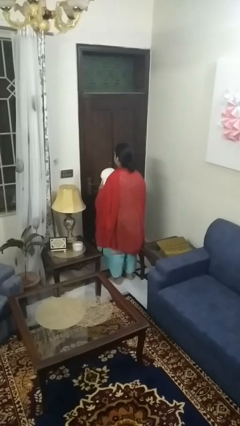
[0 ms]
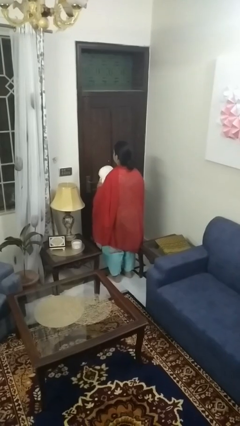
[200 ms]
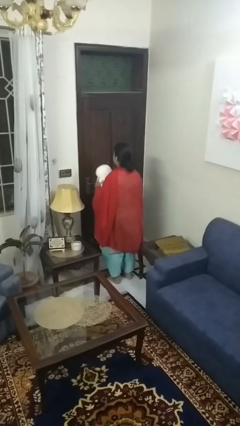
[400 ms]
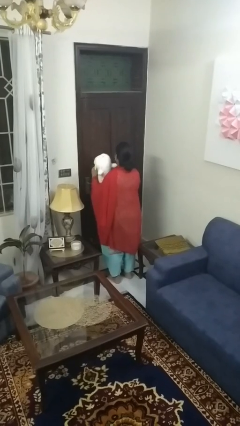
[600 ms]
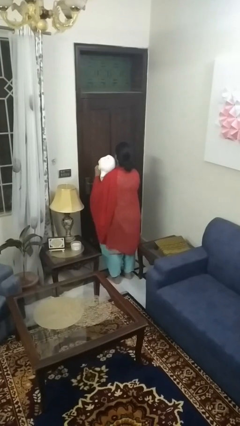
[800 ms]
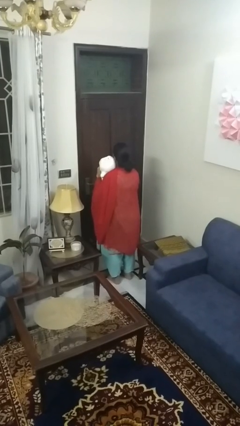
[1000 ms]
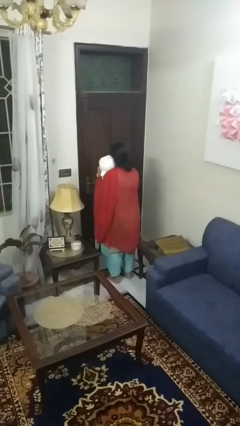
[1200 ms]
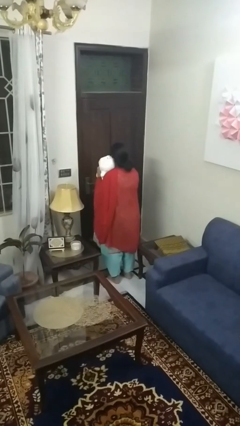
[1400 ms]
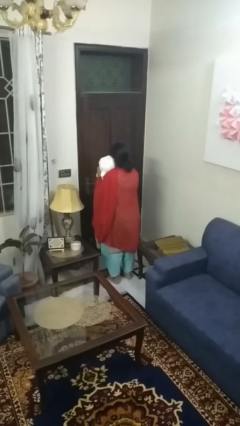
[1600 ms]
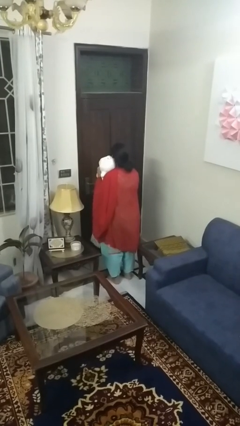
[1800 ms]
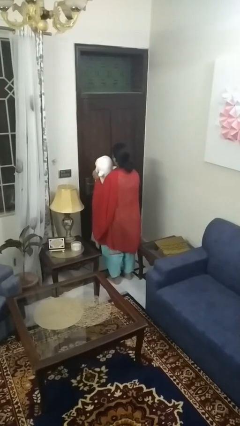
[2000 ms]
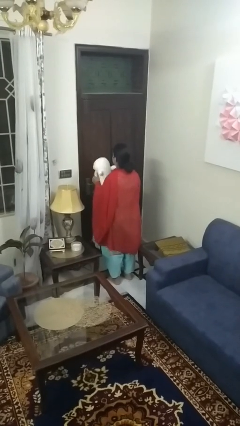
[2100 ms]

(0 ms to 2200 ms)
person hugs stuffed animal

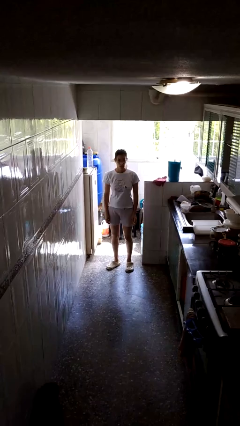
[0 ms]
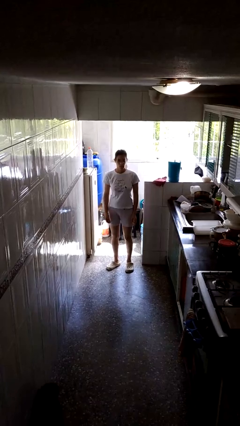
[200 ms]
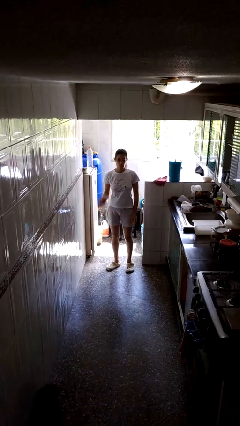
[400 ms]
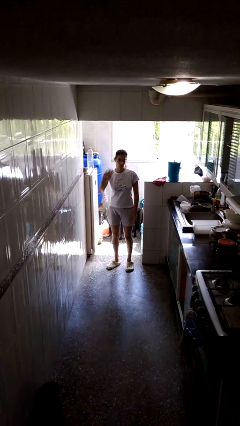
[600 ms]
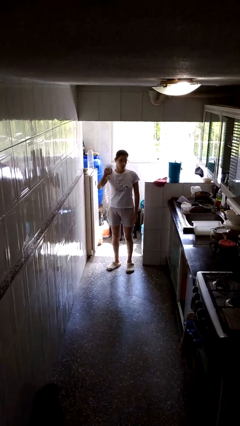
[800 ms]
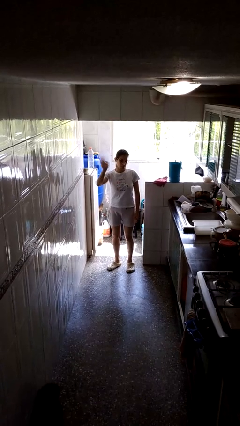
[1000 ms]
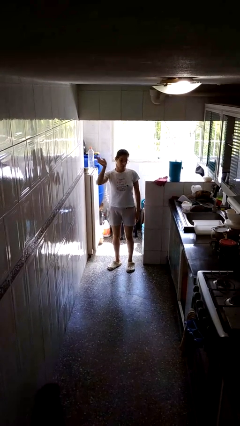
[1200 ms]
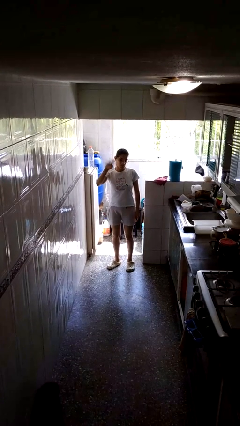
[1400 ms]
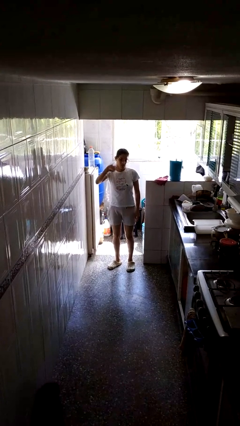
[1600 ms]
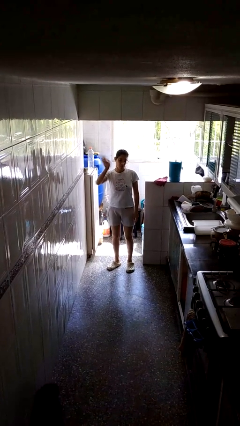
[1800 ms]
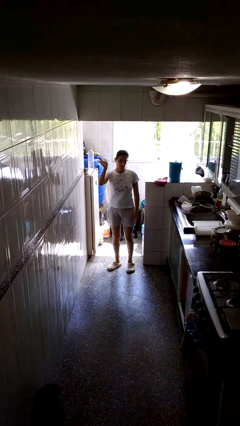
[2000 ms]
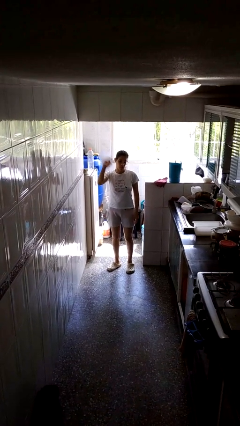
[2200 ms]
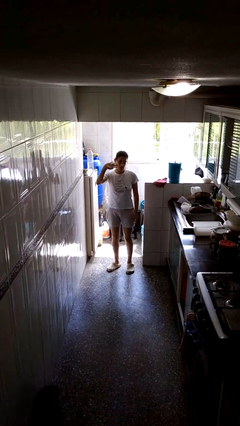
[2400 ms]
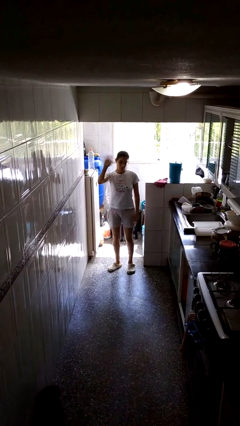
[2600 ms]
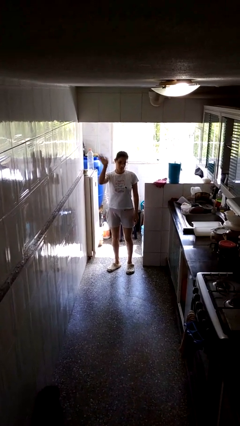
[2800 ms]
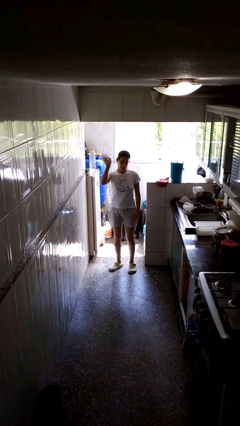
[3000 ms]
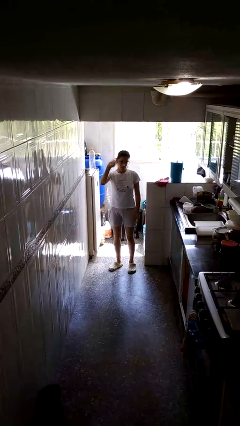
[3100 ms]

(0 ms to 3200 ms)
person waves at person

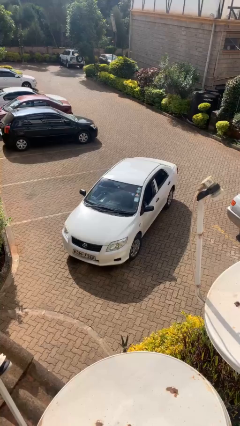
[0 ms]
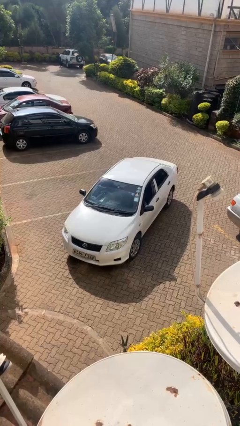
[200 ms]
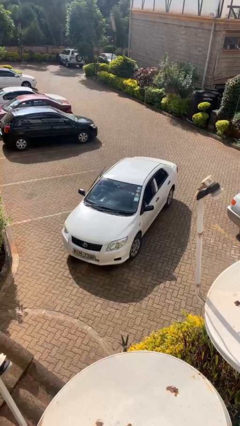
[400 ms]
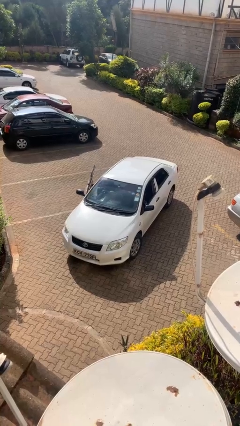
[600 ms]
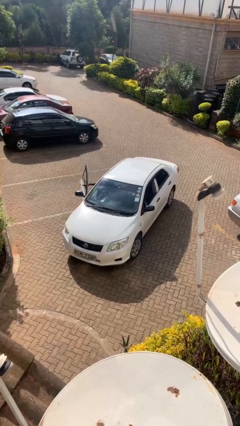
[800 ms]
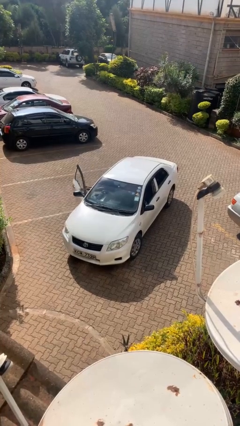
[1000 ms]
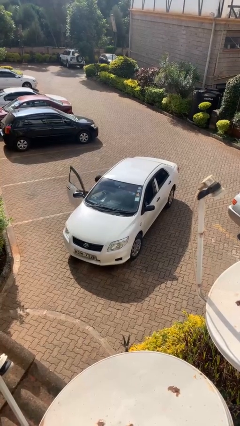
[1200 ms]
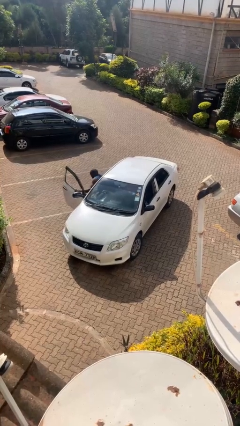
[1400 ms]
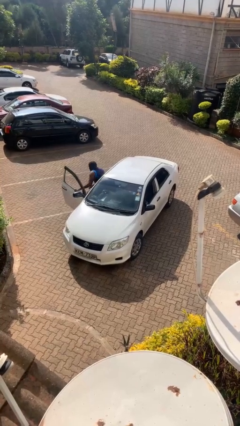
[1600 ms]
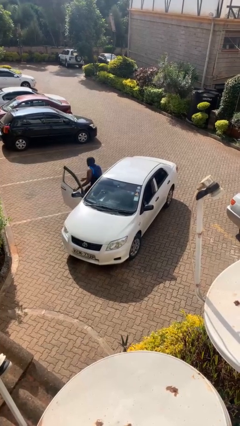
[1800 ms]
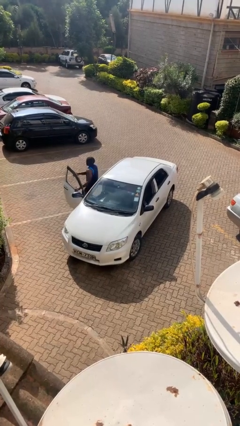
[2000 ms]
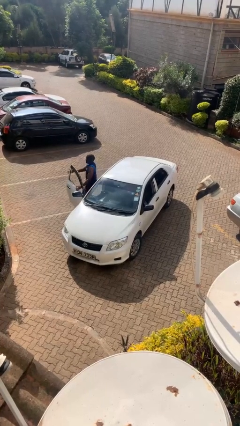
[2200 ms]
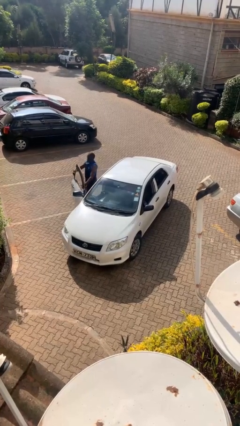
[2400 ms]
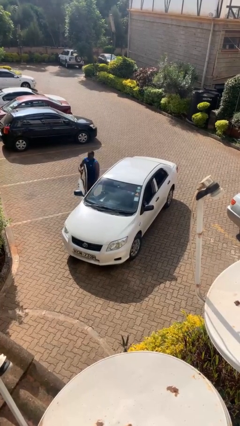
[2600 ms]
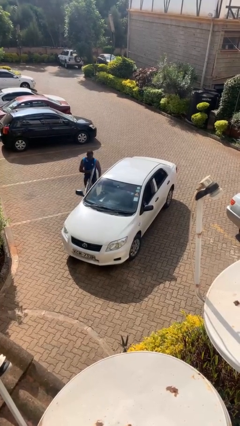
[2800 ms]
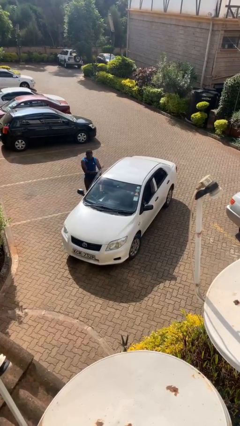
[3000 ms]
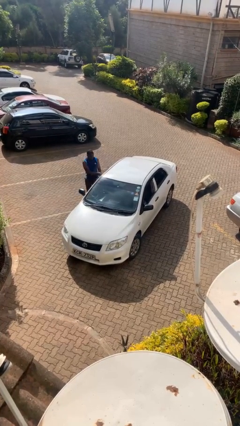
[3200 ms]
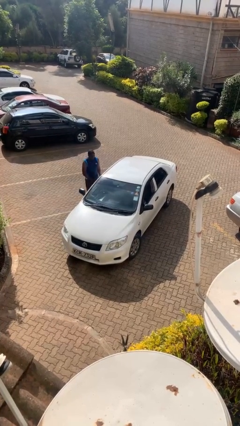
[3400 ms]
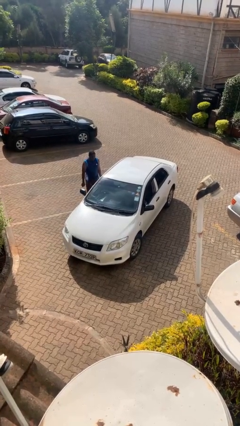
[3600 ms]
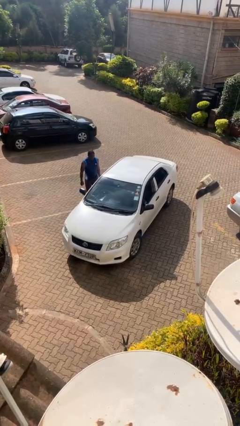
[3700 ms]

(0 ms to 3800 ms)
car drops off person

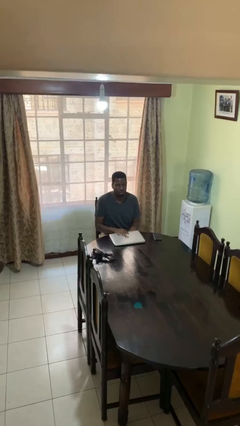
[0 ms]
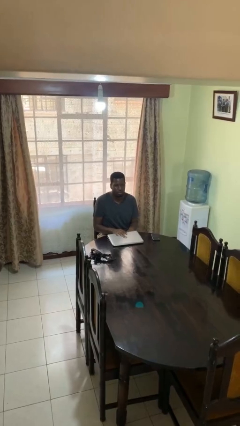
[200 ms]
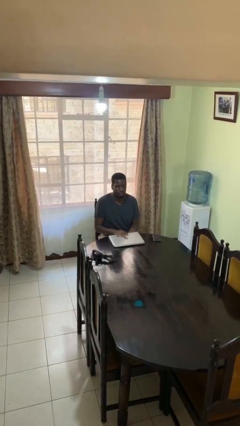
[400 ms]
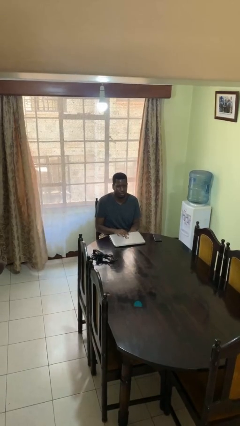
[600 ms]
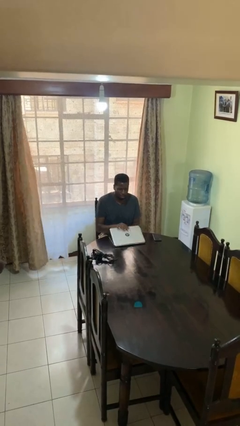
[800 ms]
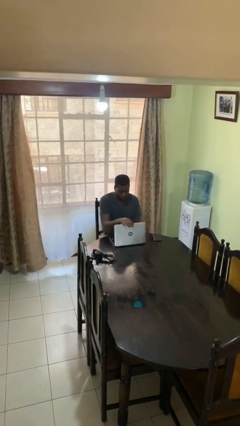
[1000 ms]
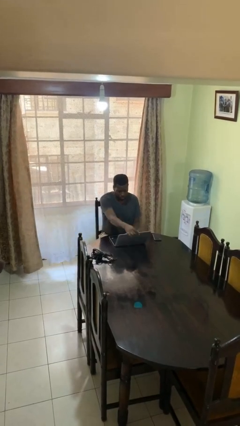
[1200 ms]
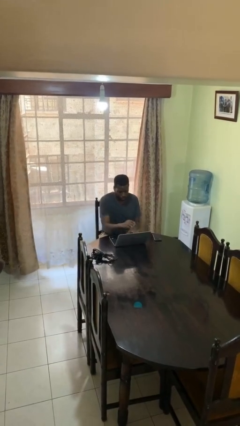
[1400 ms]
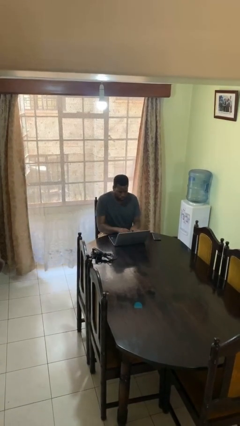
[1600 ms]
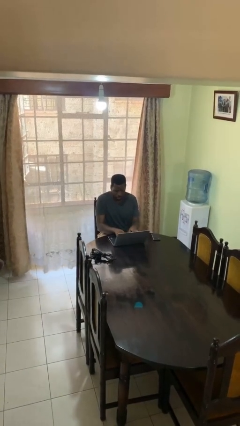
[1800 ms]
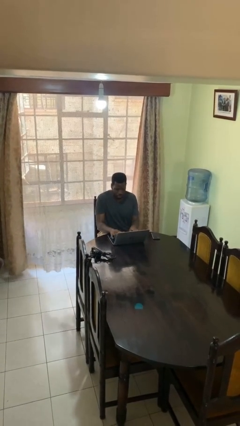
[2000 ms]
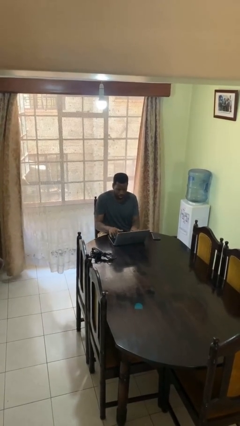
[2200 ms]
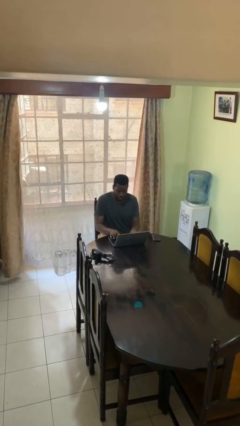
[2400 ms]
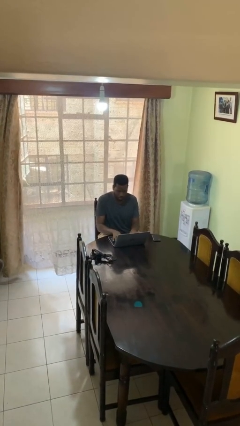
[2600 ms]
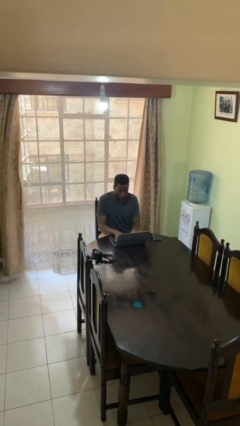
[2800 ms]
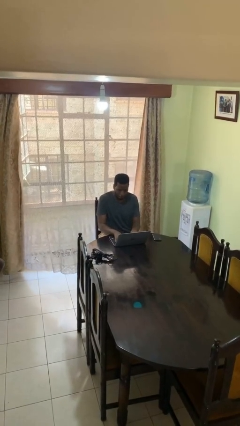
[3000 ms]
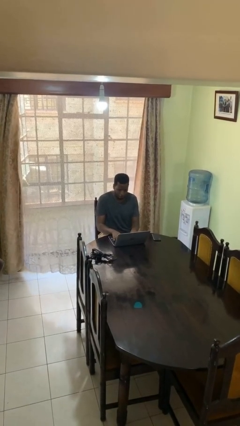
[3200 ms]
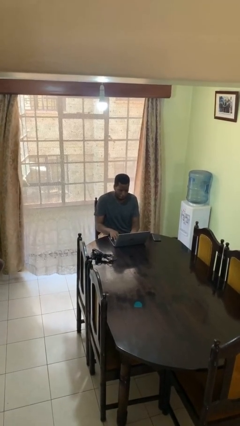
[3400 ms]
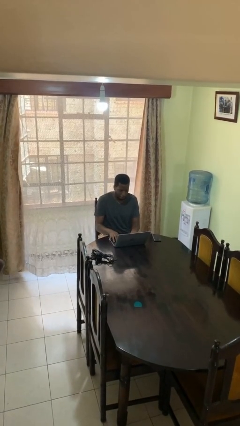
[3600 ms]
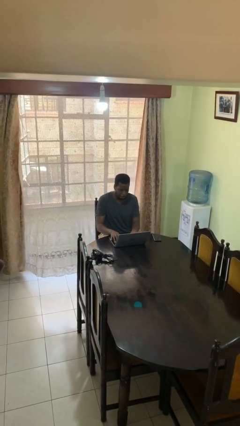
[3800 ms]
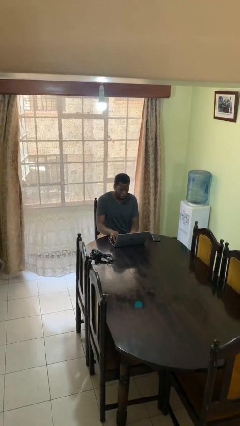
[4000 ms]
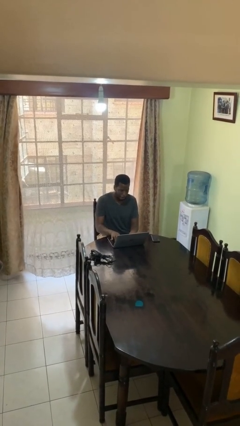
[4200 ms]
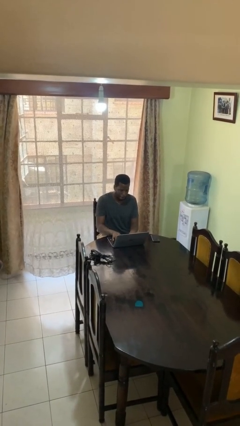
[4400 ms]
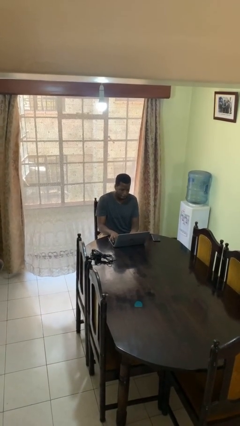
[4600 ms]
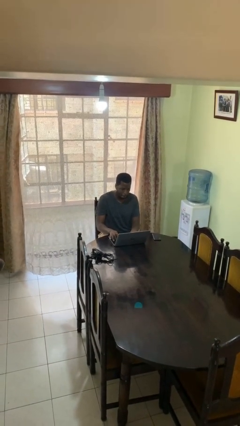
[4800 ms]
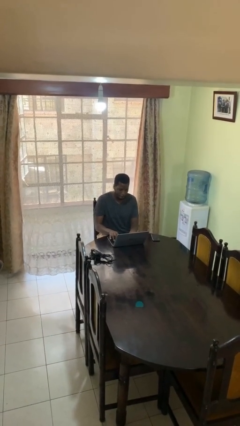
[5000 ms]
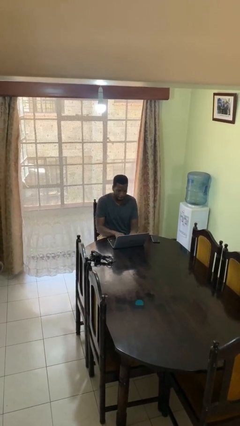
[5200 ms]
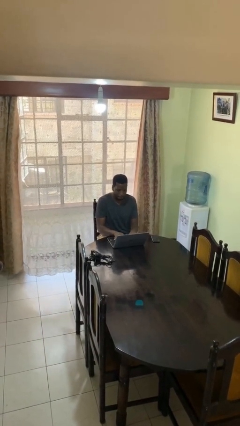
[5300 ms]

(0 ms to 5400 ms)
person interacts with laptop

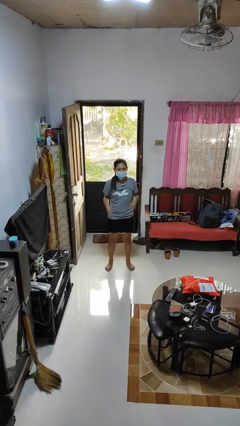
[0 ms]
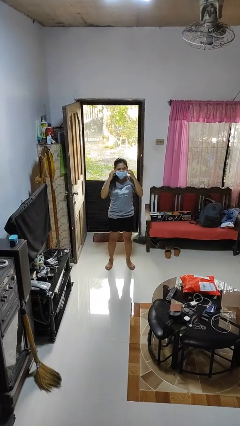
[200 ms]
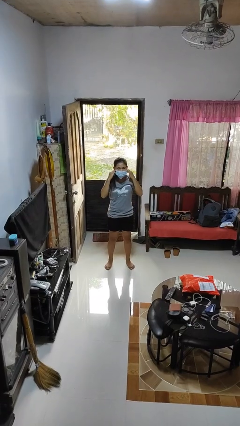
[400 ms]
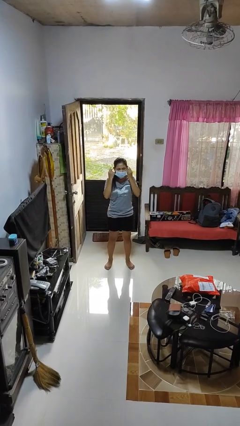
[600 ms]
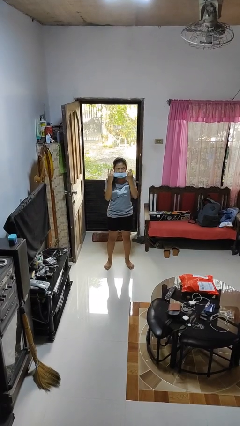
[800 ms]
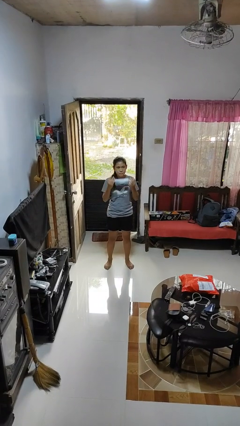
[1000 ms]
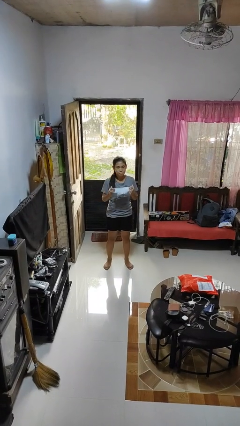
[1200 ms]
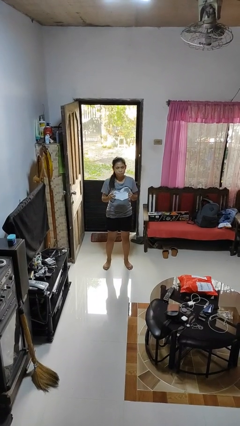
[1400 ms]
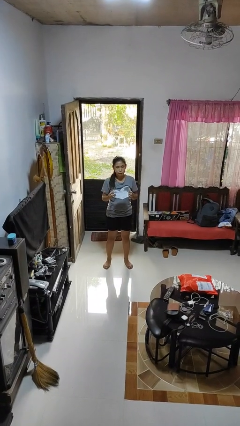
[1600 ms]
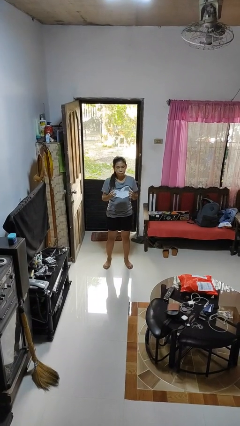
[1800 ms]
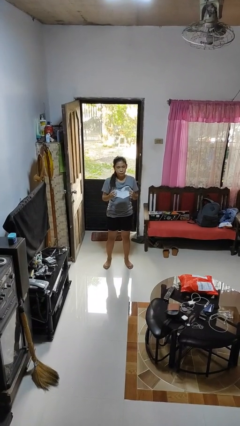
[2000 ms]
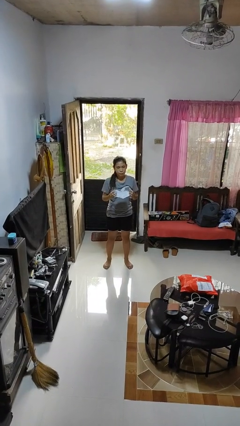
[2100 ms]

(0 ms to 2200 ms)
person takes off facemask

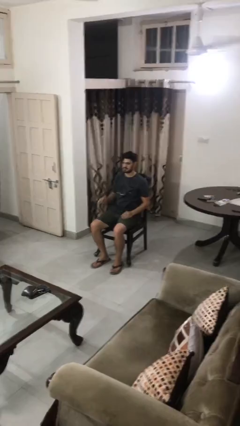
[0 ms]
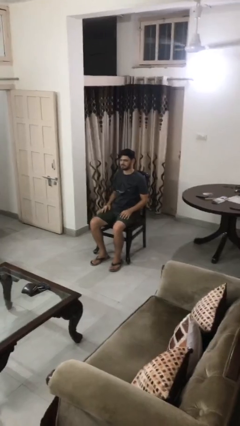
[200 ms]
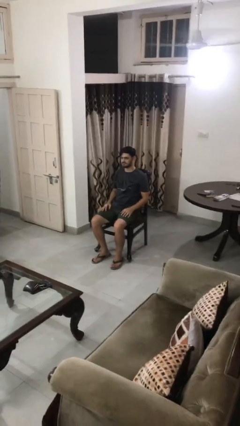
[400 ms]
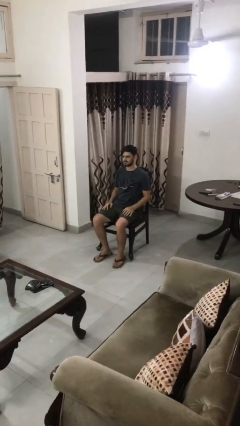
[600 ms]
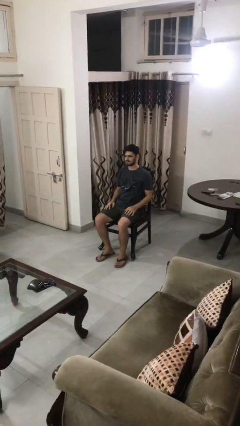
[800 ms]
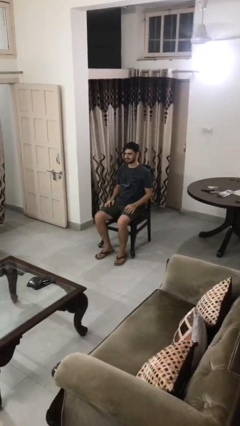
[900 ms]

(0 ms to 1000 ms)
person gestures lower hand
